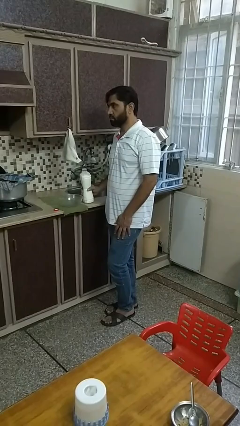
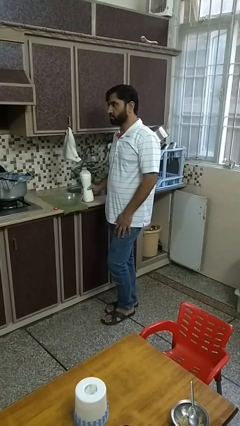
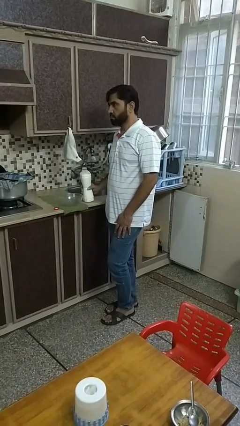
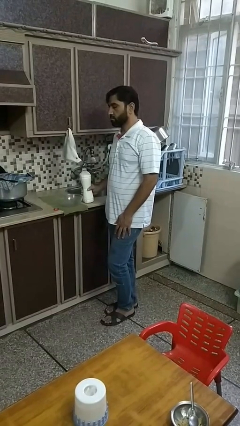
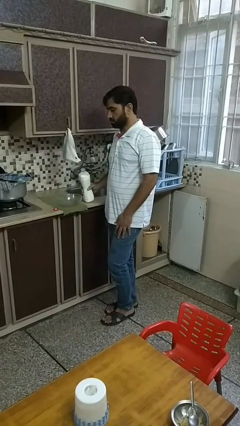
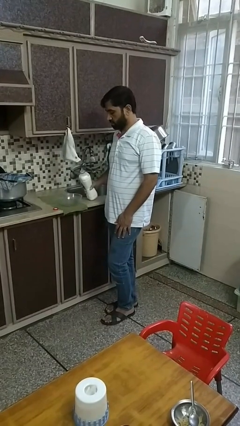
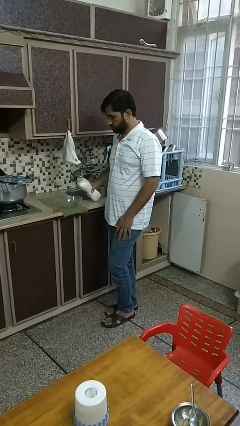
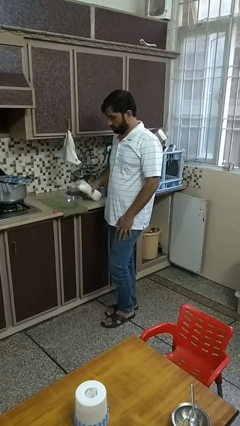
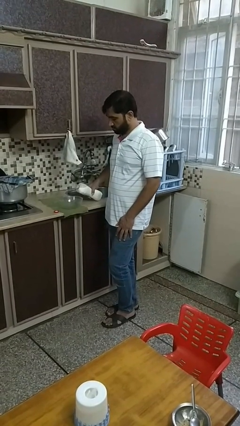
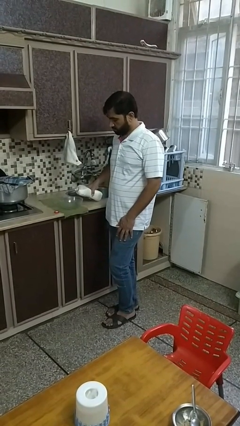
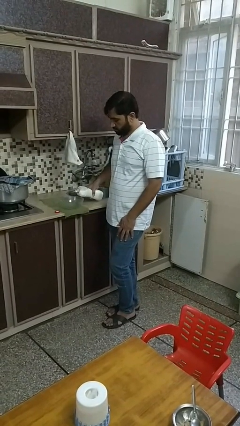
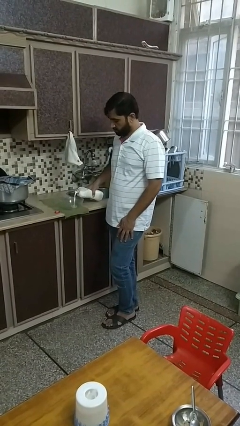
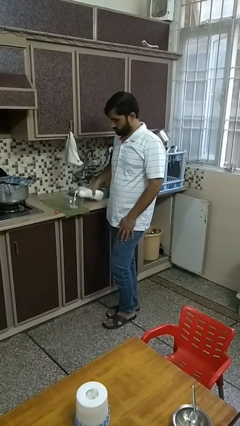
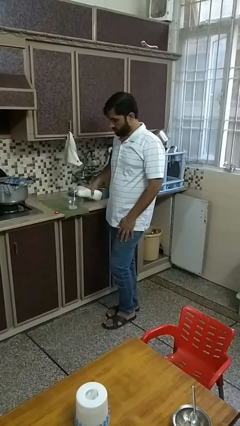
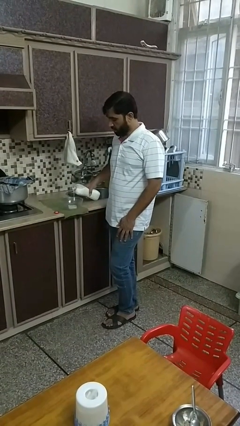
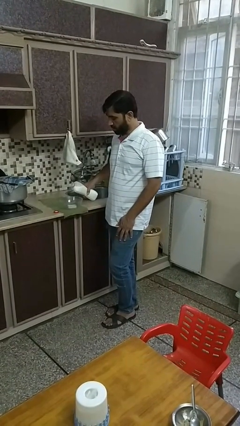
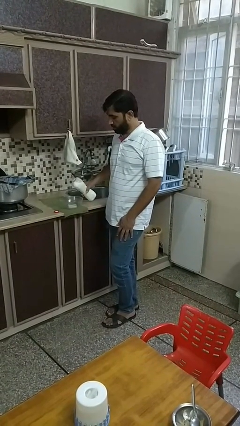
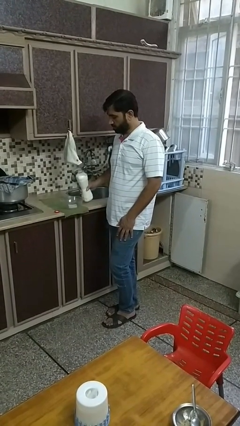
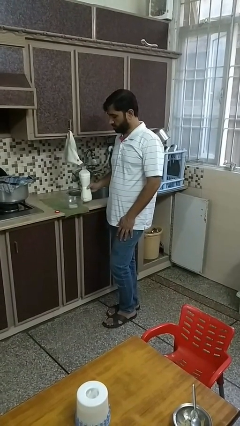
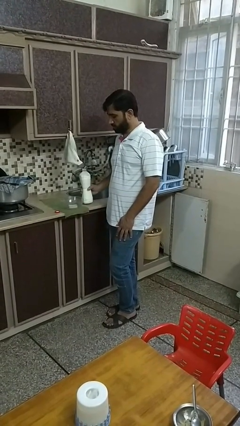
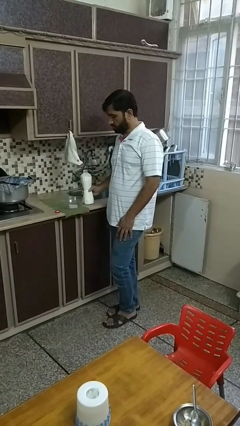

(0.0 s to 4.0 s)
person pours into bowl

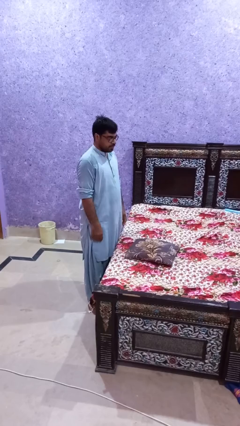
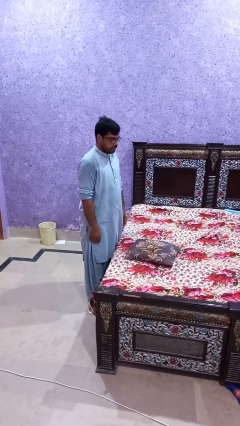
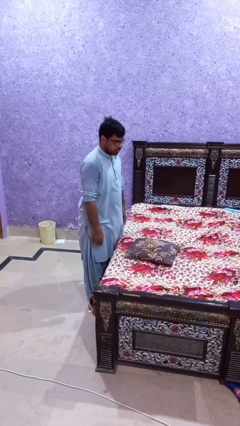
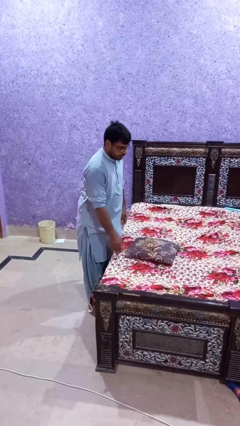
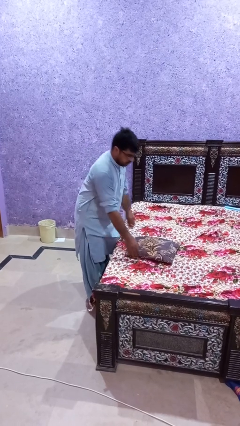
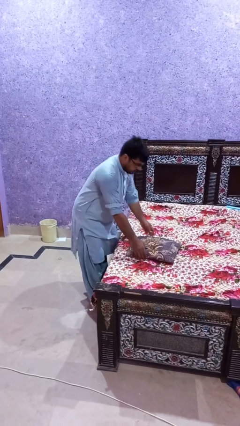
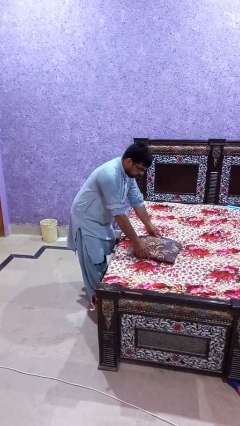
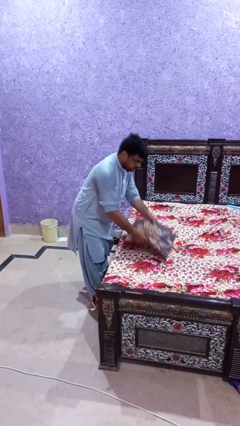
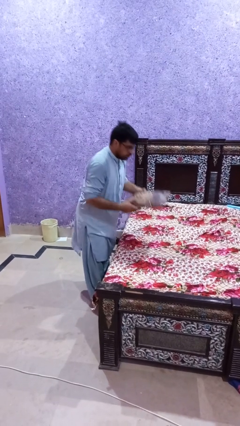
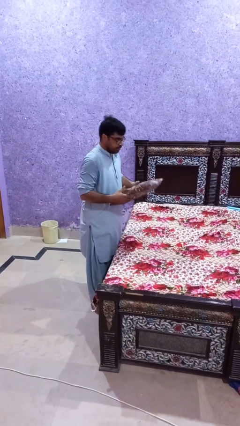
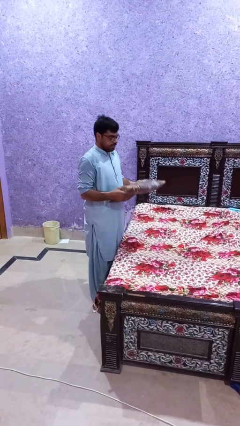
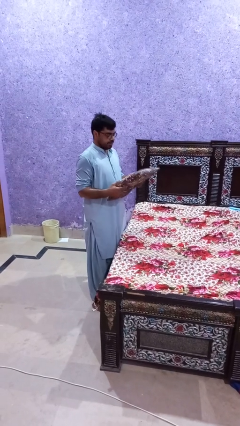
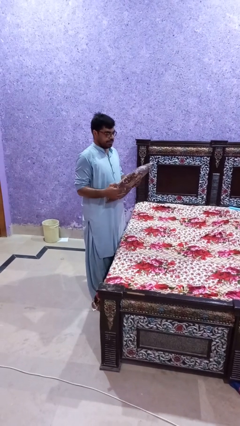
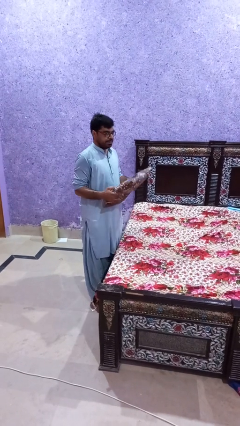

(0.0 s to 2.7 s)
person picks up object from bed

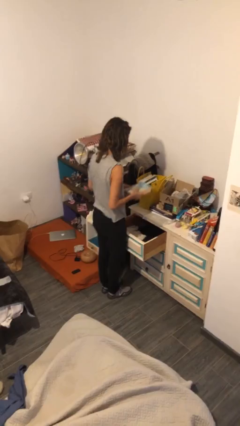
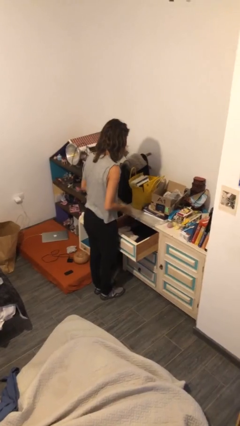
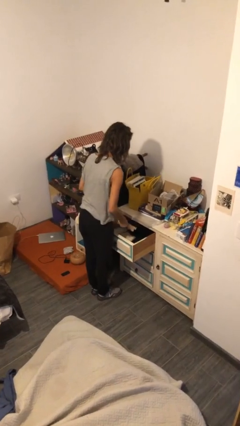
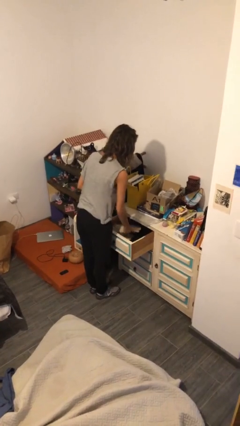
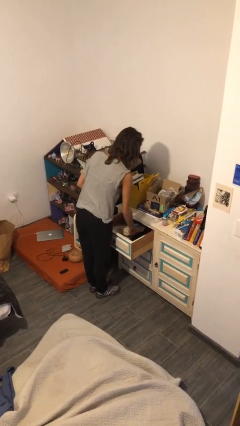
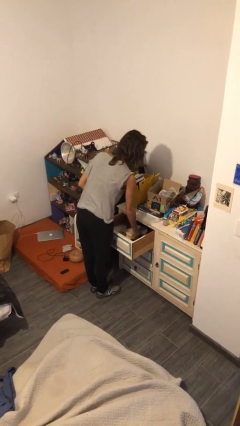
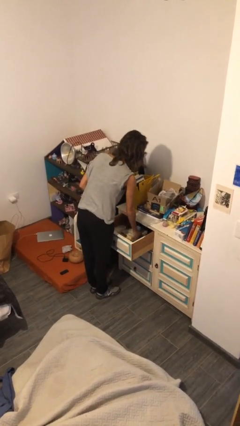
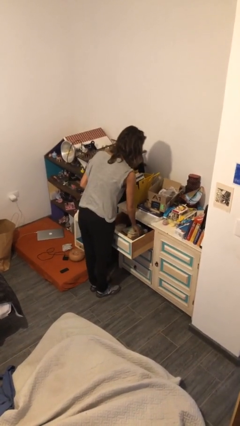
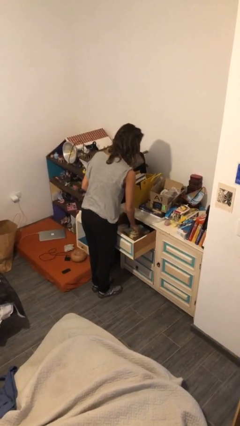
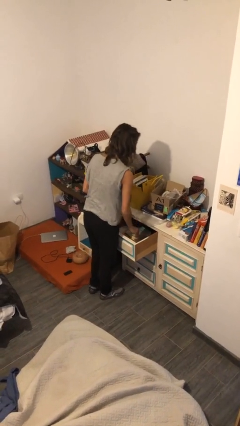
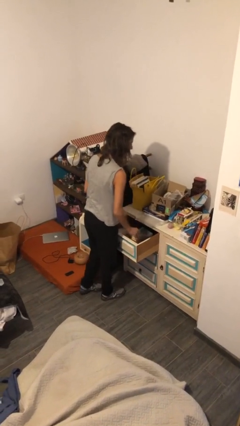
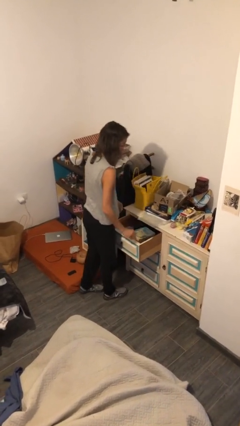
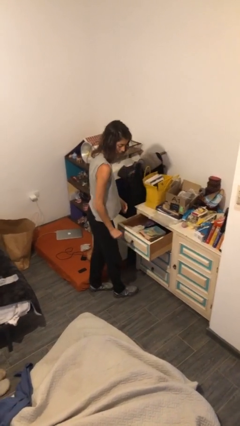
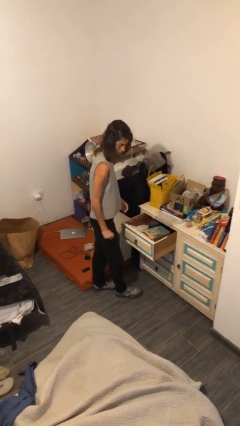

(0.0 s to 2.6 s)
person puts down object into cabinet

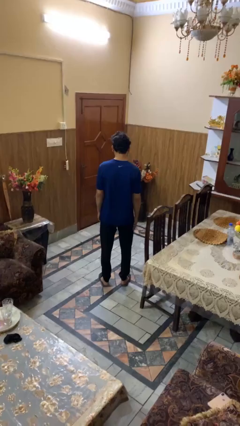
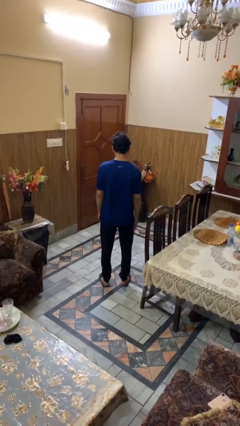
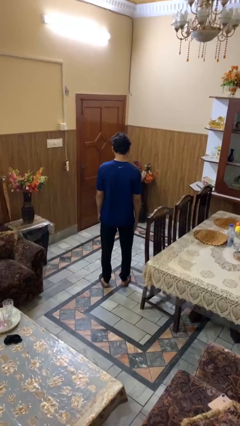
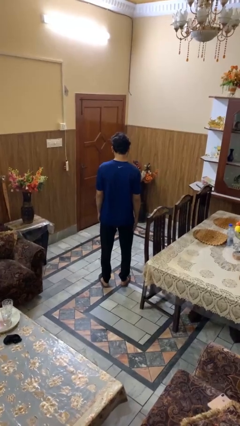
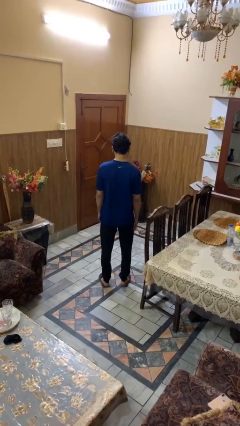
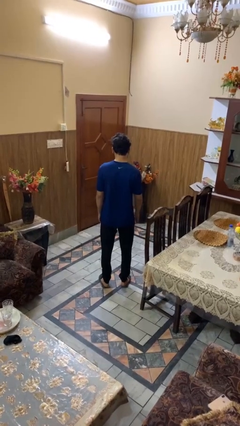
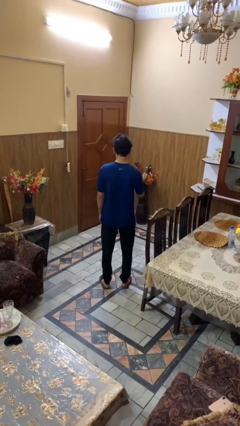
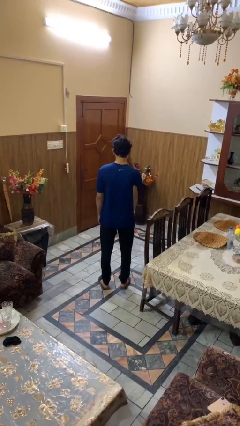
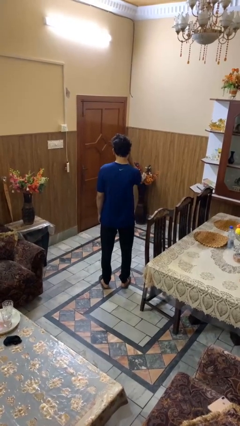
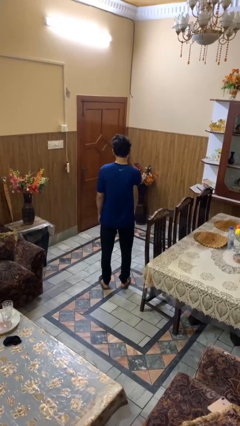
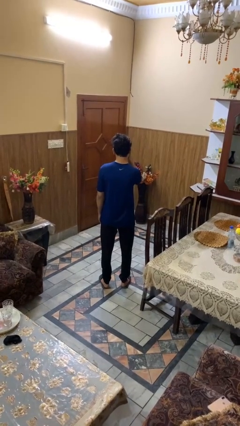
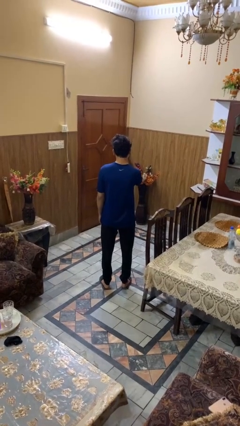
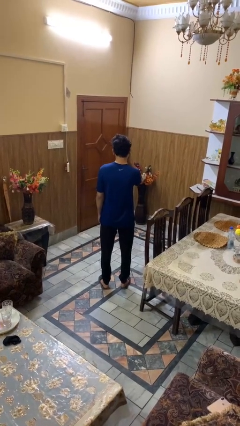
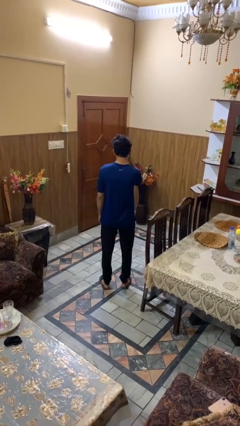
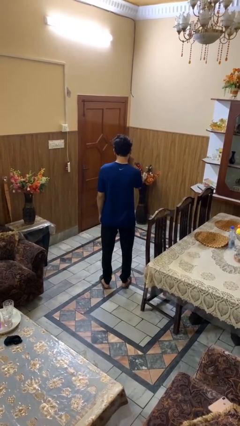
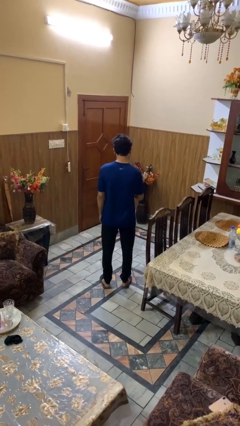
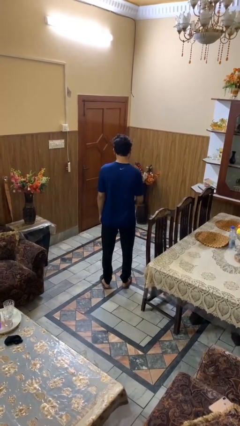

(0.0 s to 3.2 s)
person rubs eyes

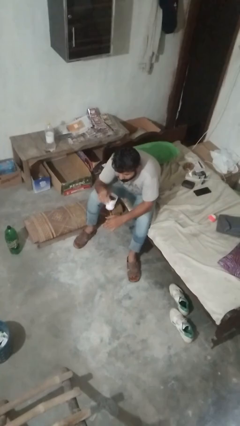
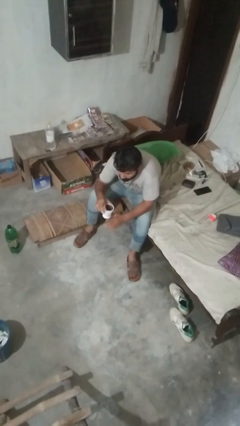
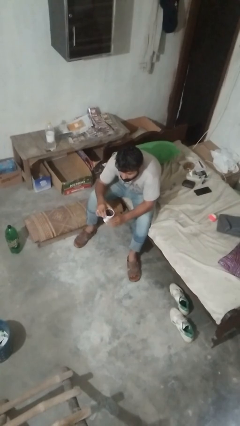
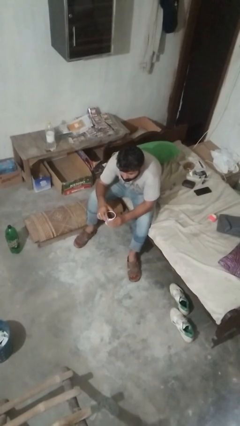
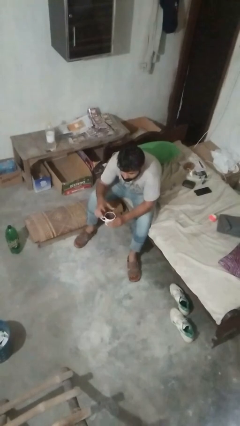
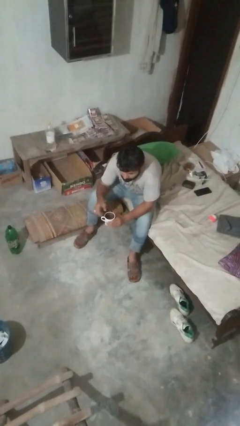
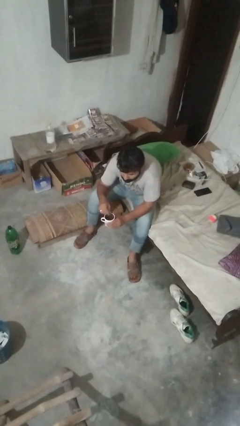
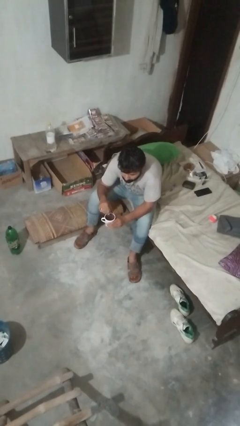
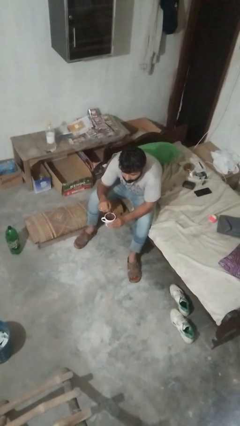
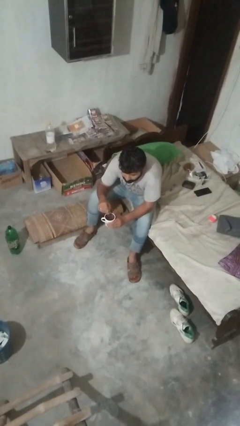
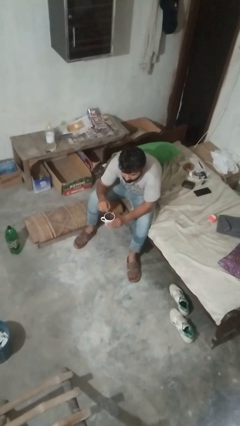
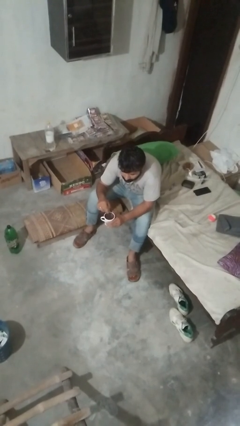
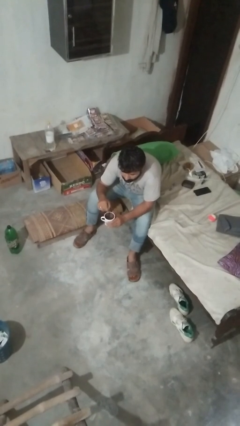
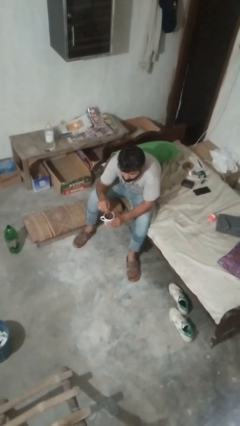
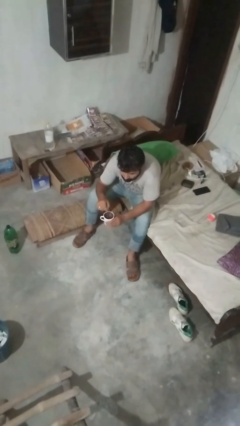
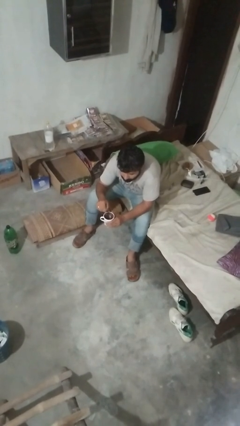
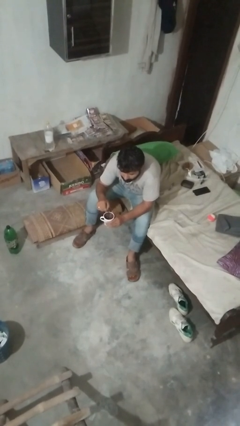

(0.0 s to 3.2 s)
person stirs mug

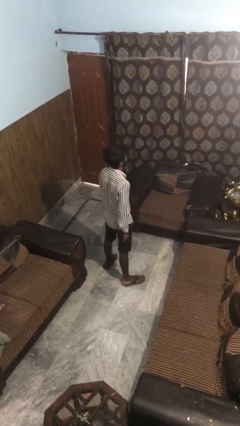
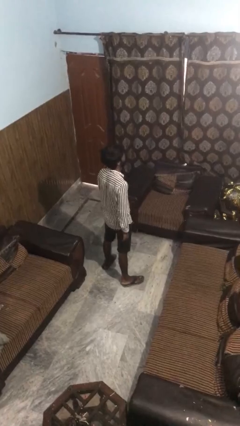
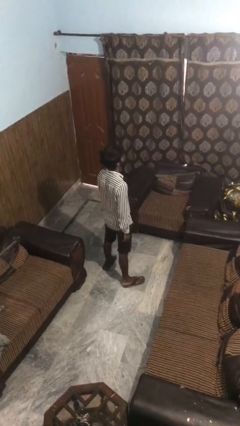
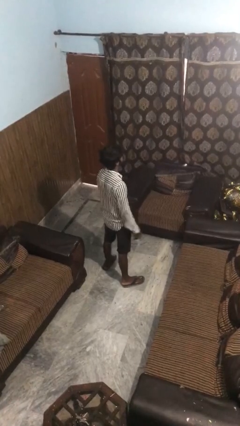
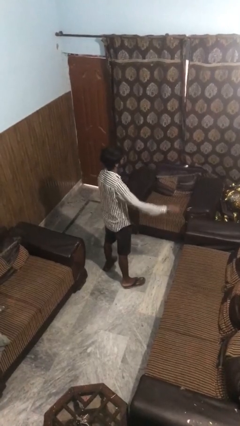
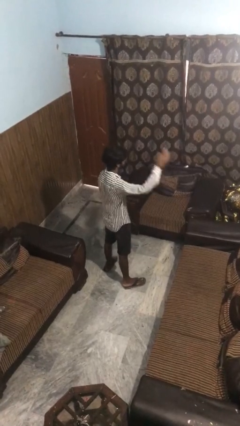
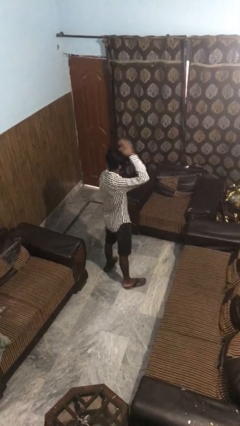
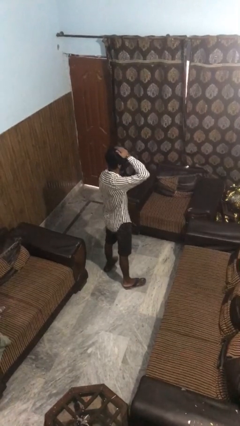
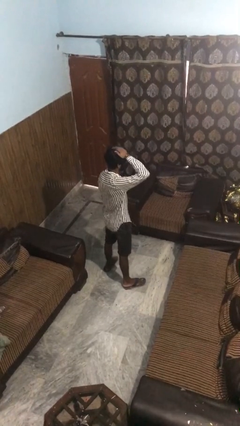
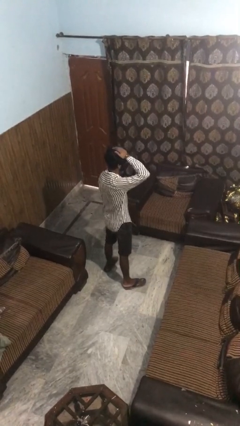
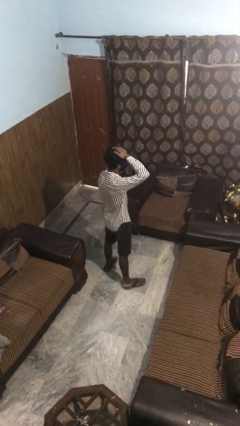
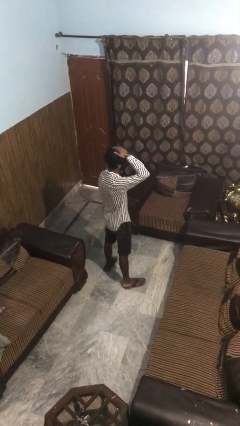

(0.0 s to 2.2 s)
person pats head
